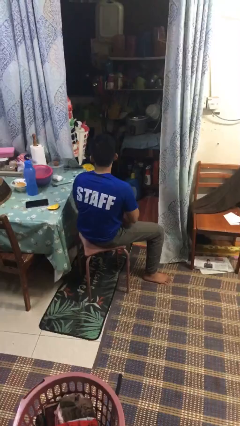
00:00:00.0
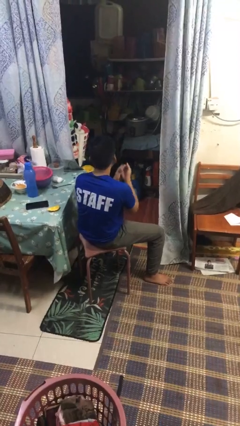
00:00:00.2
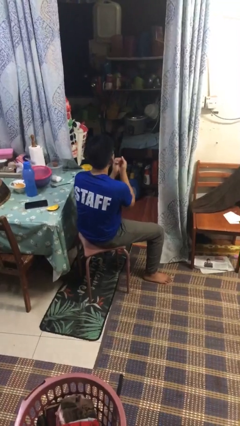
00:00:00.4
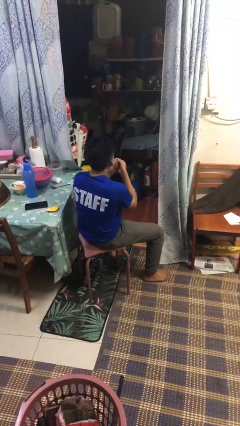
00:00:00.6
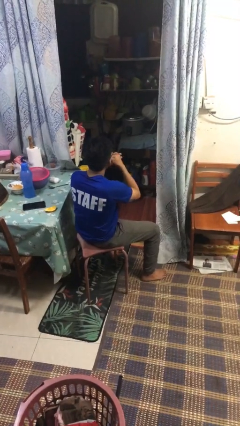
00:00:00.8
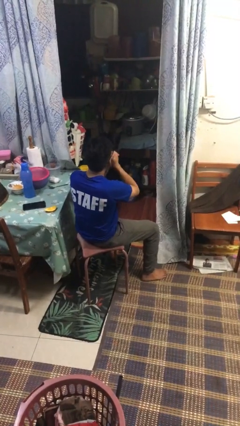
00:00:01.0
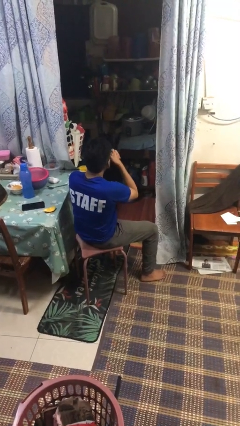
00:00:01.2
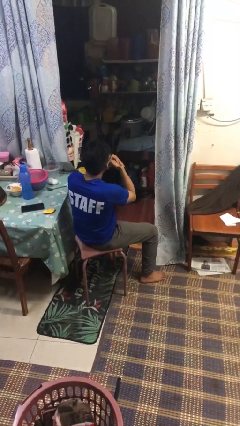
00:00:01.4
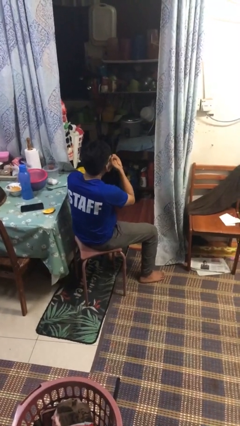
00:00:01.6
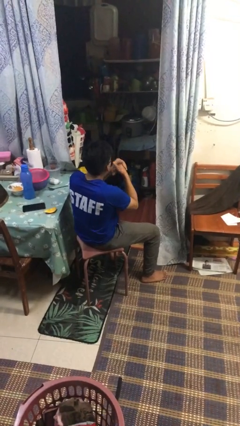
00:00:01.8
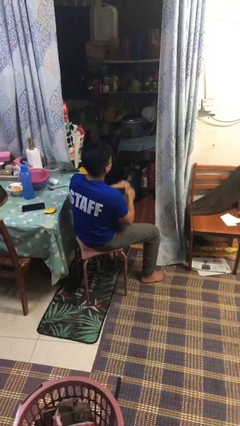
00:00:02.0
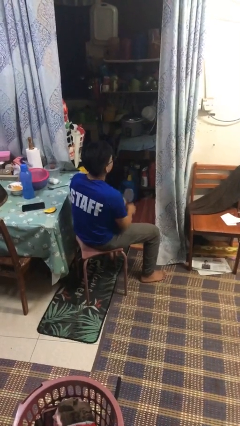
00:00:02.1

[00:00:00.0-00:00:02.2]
person cracks knuckles

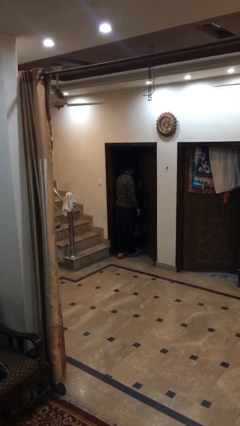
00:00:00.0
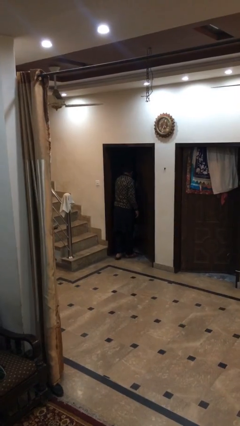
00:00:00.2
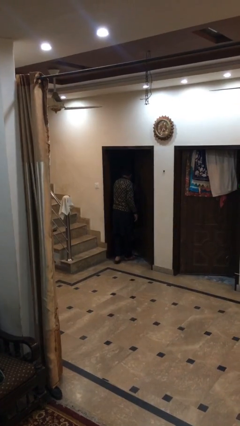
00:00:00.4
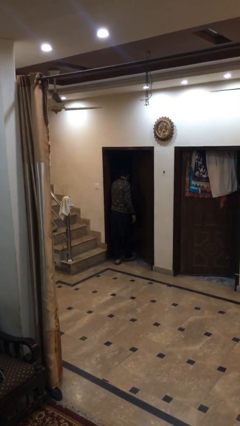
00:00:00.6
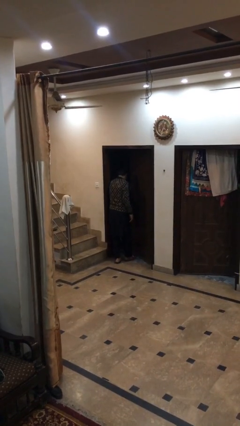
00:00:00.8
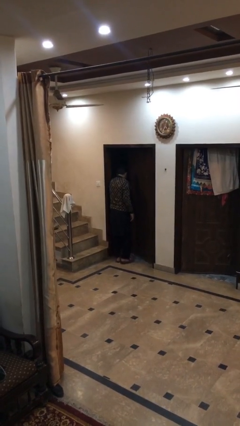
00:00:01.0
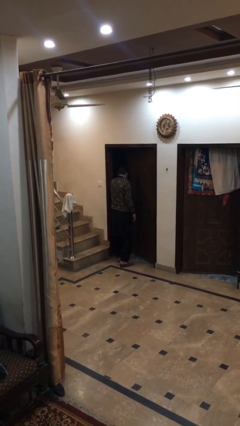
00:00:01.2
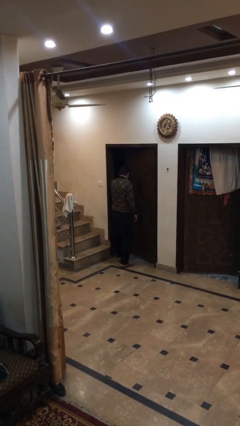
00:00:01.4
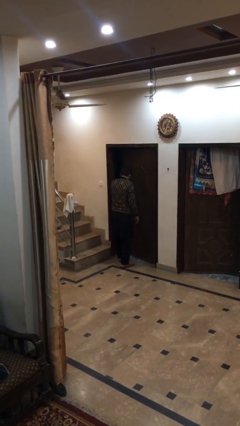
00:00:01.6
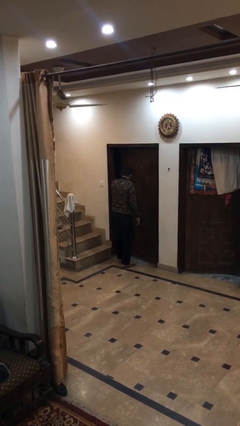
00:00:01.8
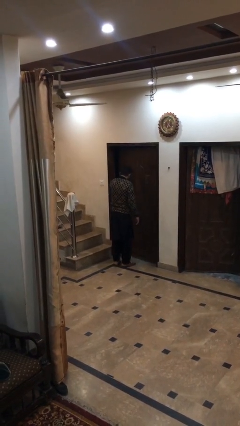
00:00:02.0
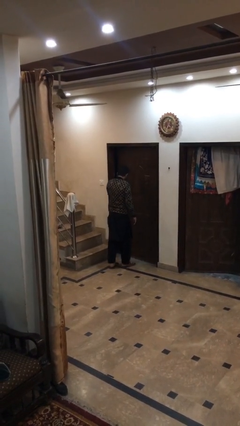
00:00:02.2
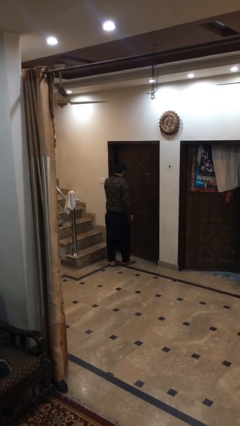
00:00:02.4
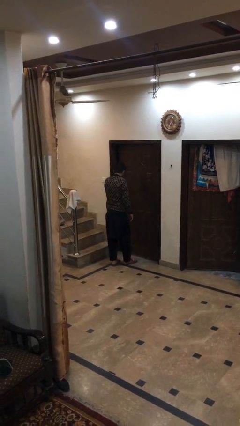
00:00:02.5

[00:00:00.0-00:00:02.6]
person closes facility door

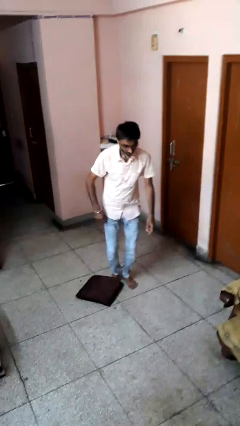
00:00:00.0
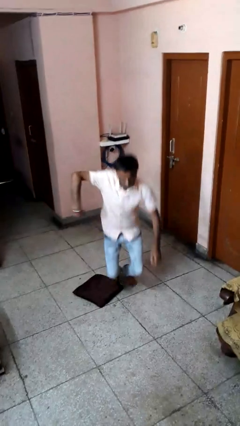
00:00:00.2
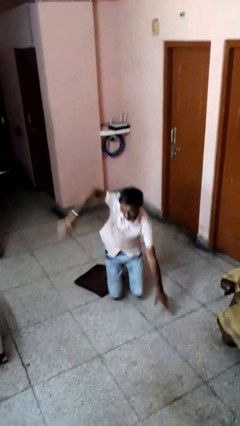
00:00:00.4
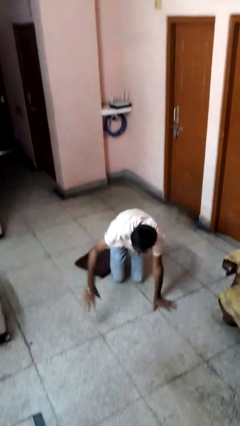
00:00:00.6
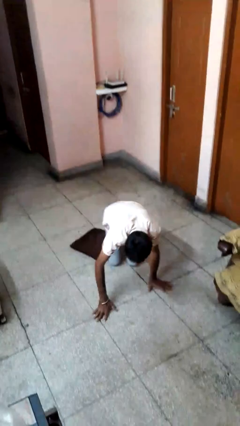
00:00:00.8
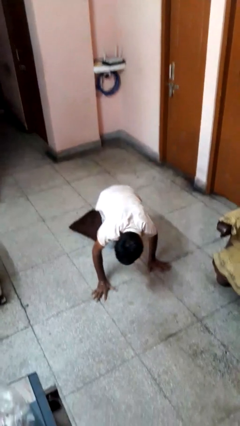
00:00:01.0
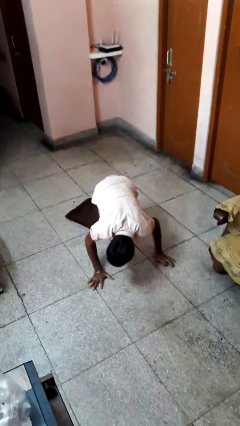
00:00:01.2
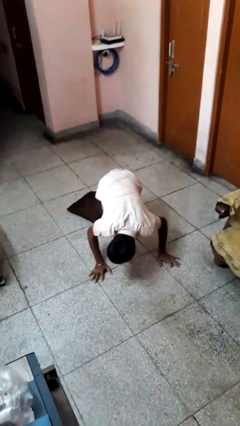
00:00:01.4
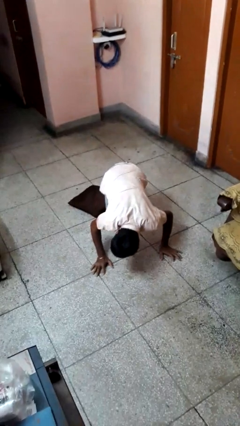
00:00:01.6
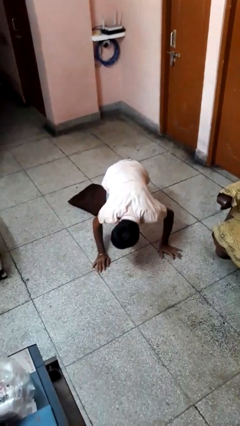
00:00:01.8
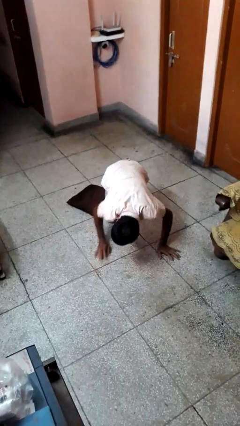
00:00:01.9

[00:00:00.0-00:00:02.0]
person trips on object on floor

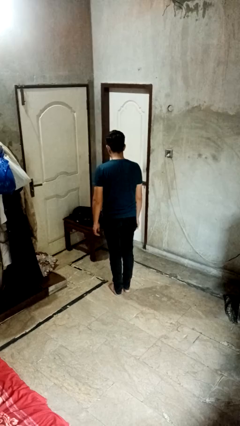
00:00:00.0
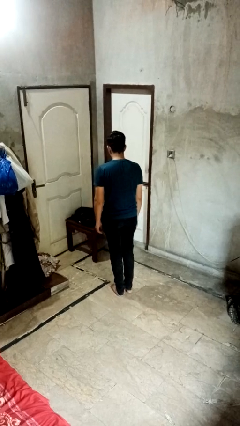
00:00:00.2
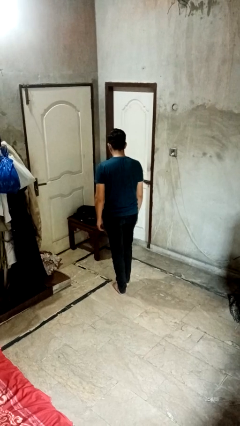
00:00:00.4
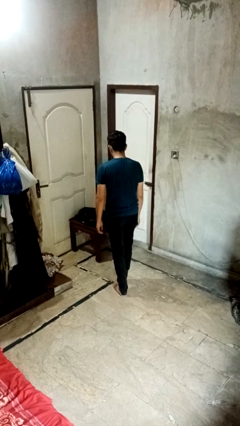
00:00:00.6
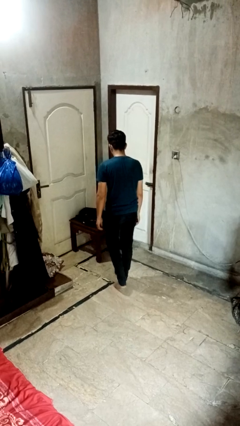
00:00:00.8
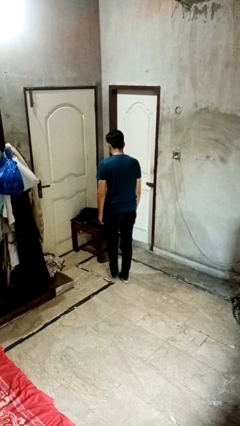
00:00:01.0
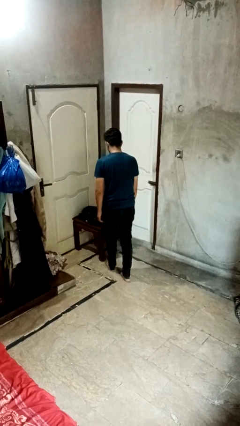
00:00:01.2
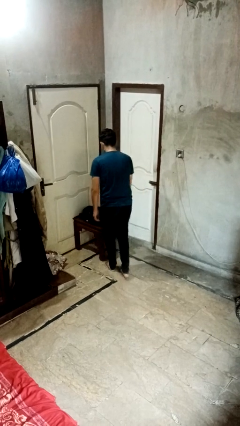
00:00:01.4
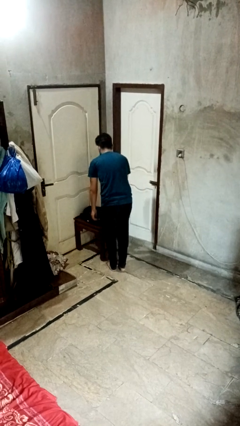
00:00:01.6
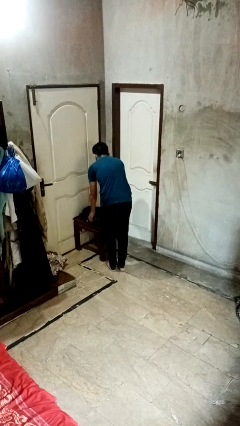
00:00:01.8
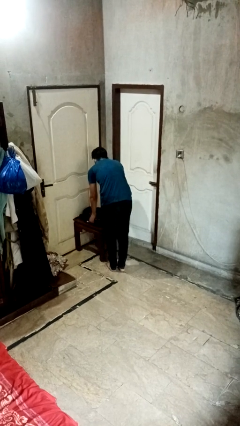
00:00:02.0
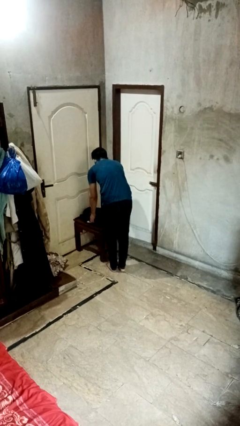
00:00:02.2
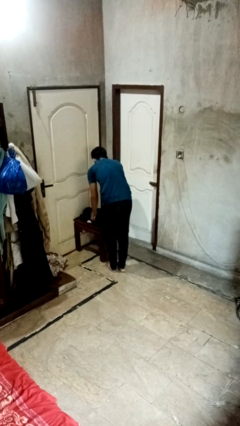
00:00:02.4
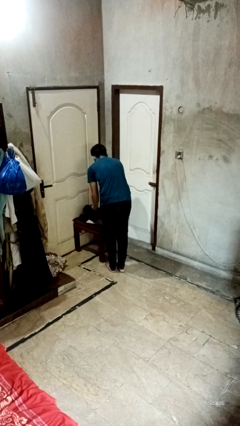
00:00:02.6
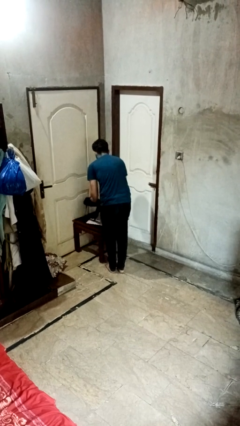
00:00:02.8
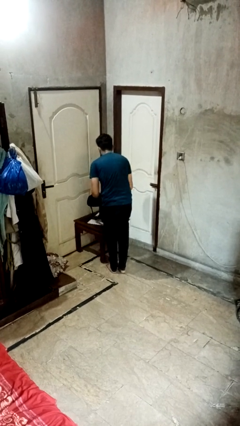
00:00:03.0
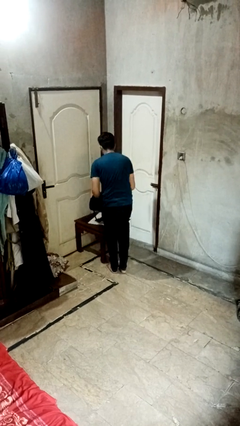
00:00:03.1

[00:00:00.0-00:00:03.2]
person picks up object from table

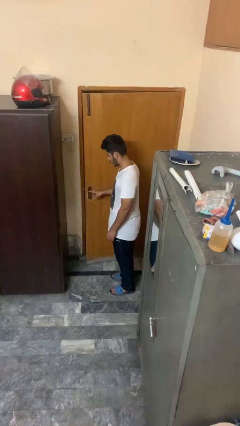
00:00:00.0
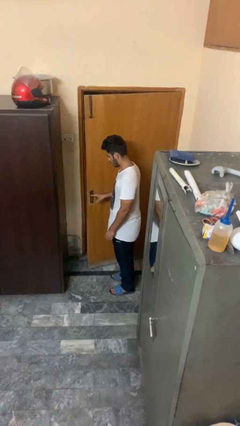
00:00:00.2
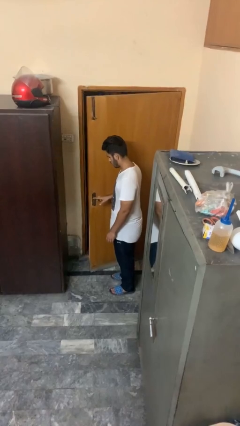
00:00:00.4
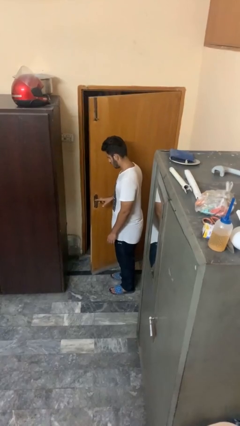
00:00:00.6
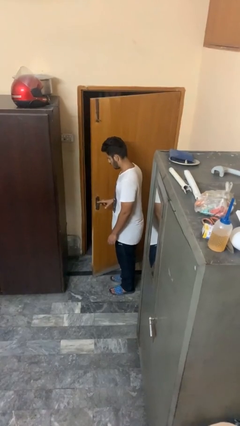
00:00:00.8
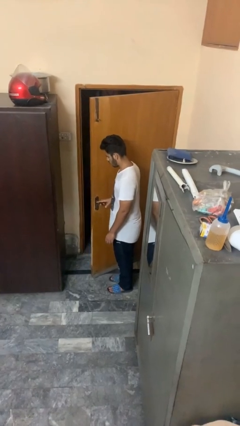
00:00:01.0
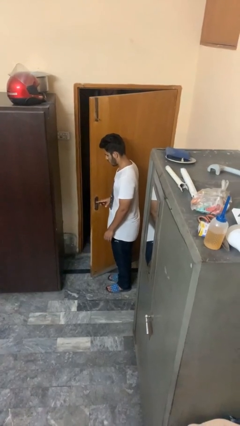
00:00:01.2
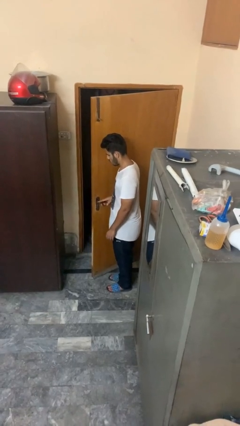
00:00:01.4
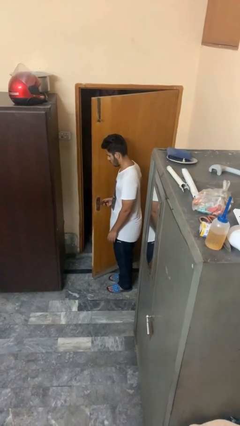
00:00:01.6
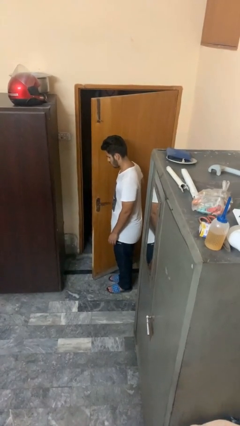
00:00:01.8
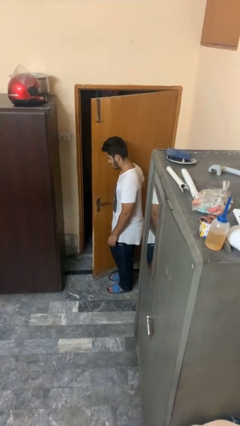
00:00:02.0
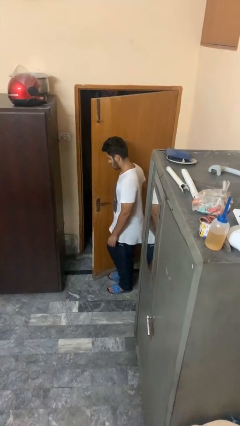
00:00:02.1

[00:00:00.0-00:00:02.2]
person opens facility door

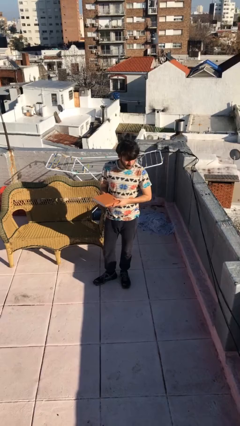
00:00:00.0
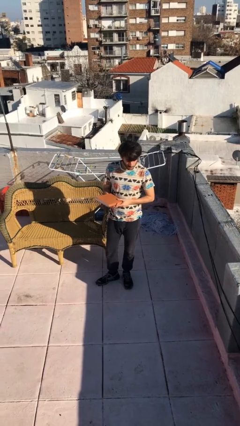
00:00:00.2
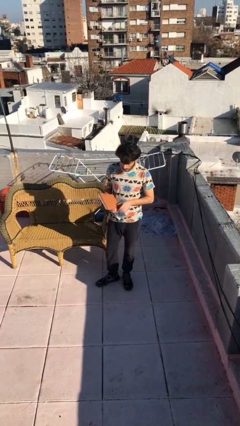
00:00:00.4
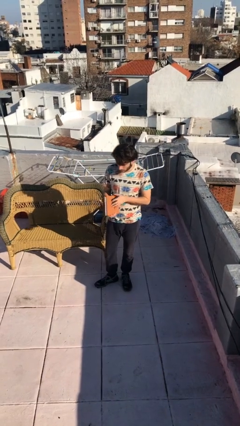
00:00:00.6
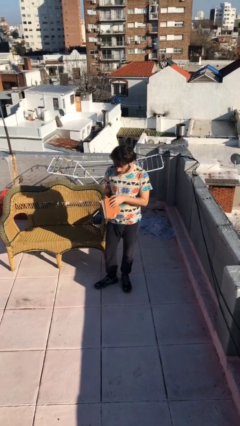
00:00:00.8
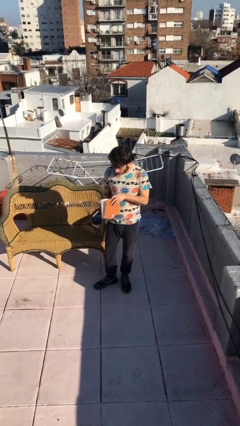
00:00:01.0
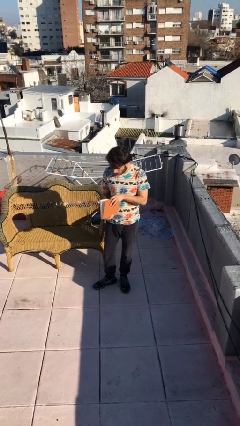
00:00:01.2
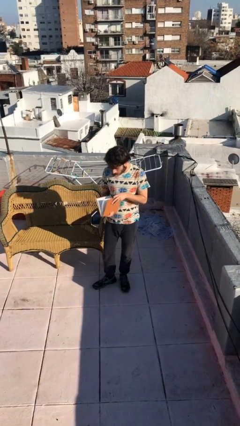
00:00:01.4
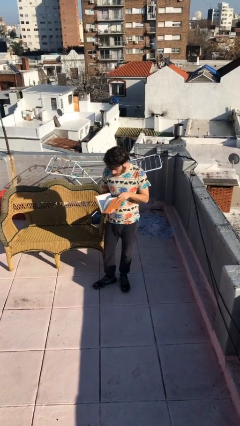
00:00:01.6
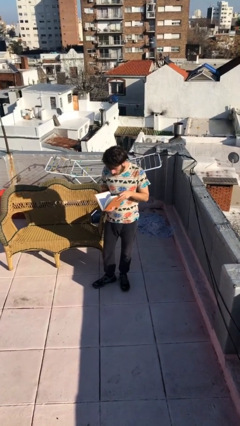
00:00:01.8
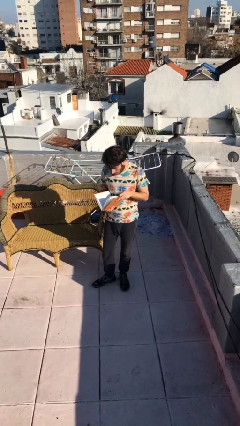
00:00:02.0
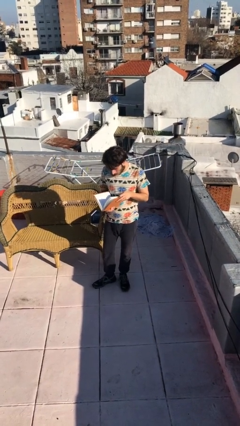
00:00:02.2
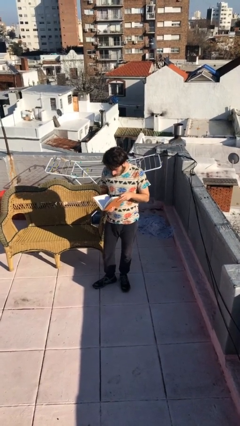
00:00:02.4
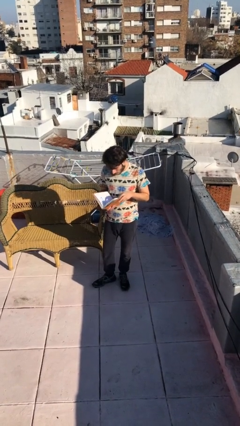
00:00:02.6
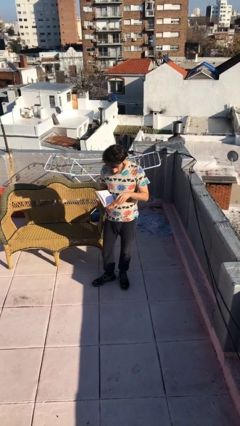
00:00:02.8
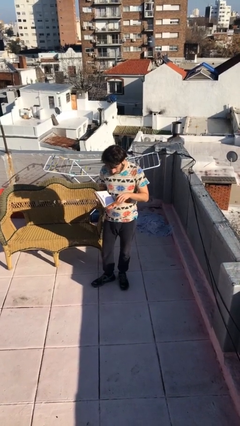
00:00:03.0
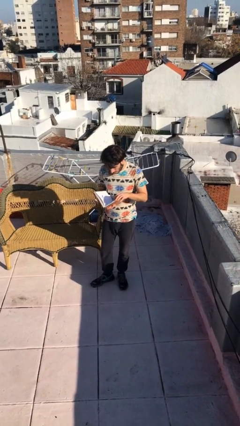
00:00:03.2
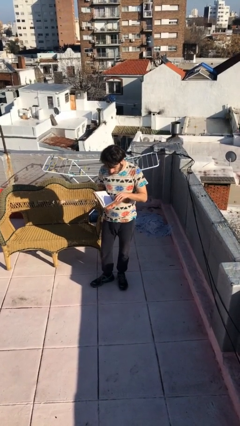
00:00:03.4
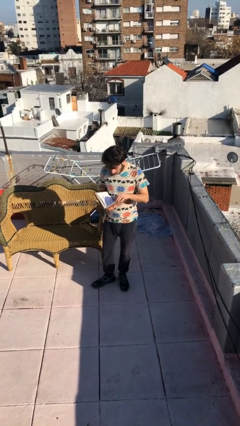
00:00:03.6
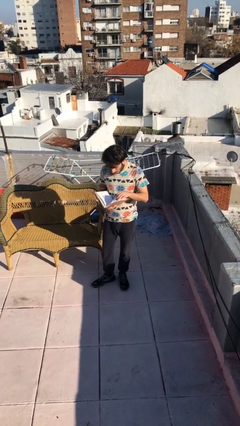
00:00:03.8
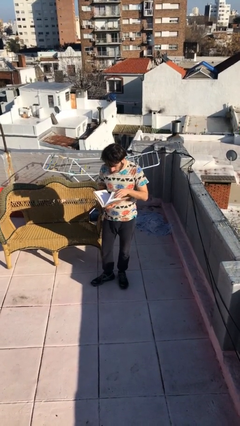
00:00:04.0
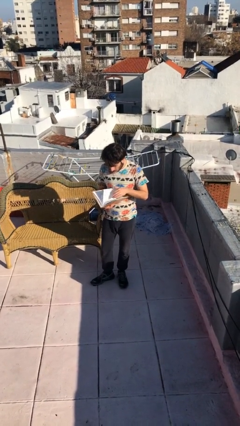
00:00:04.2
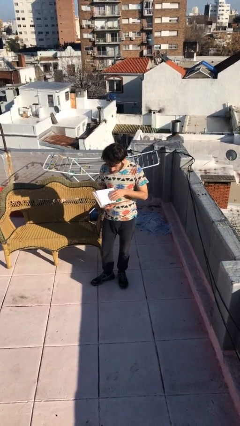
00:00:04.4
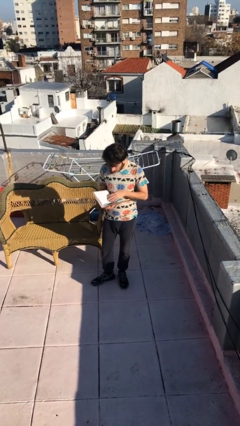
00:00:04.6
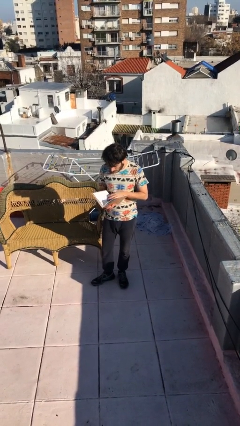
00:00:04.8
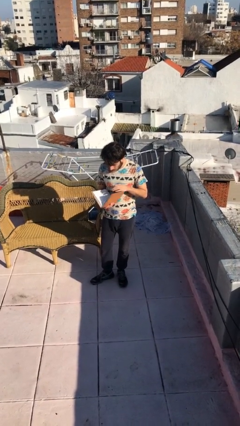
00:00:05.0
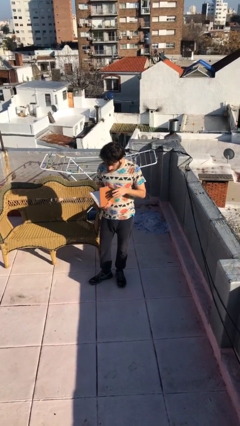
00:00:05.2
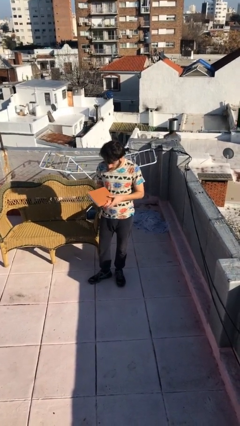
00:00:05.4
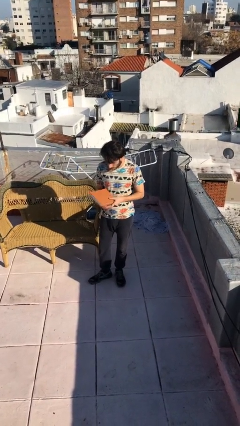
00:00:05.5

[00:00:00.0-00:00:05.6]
person reads book
